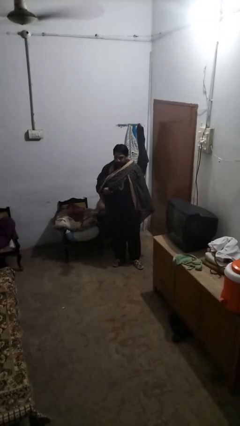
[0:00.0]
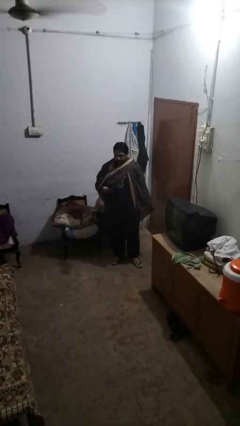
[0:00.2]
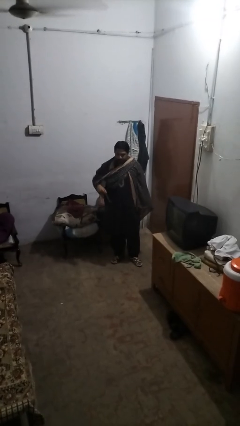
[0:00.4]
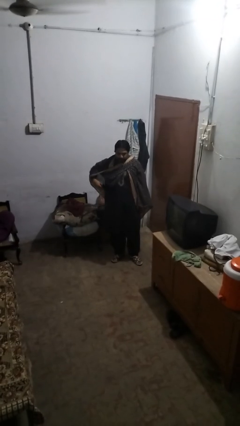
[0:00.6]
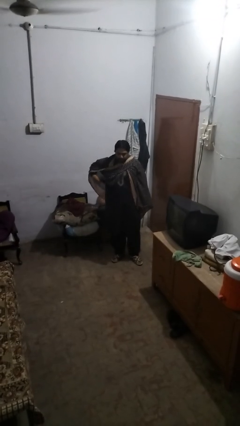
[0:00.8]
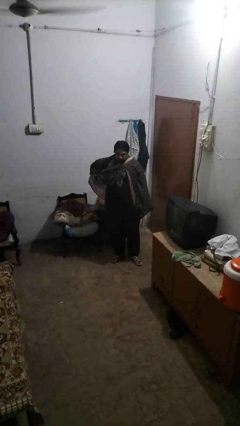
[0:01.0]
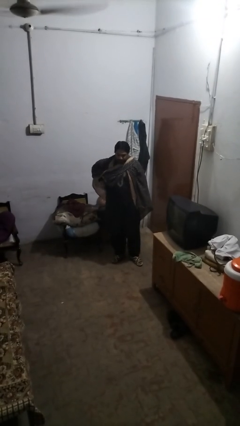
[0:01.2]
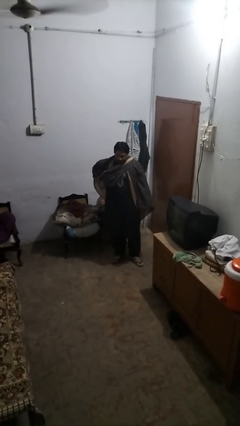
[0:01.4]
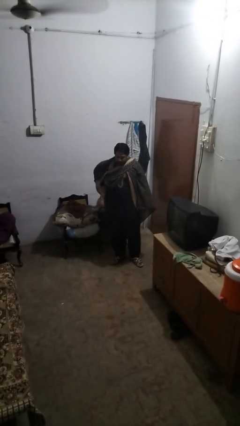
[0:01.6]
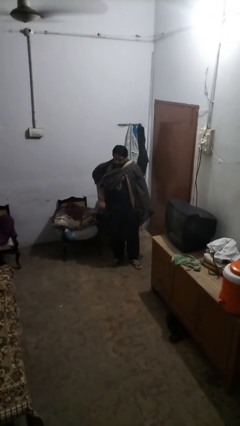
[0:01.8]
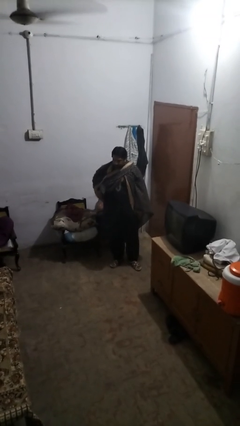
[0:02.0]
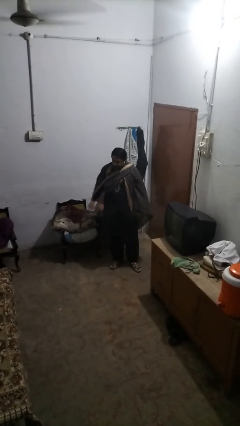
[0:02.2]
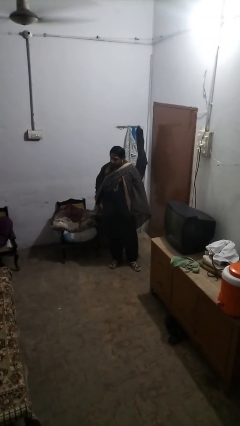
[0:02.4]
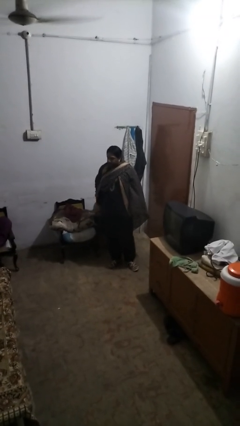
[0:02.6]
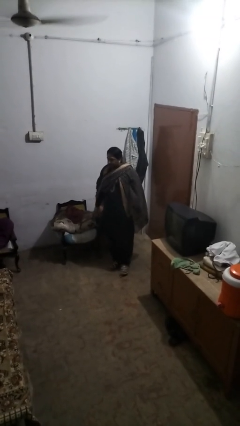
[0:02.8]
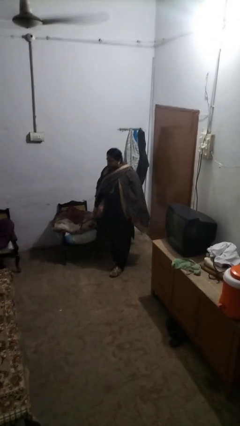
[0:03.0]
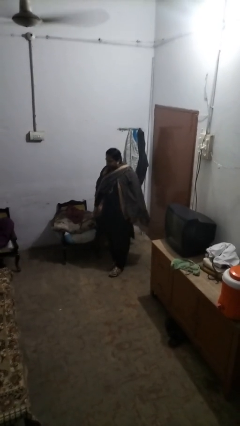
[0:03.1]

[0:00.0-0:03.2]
person puts phone into pocket

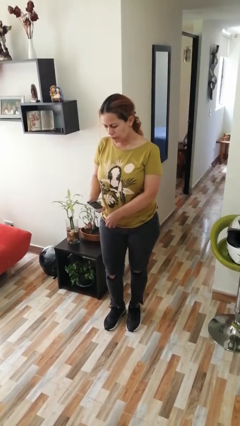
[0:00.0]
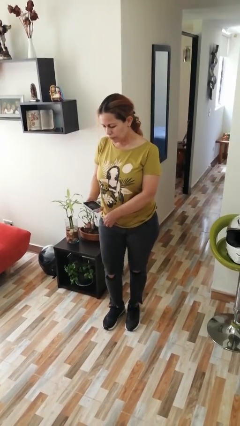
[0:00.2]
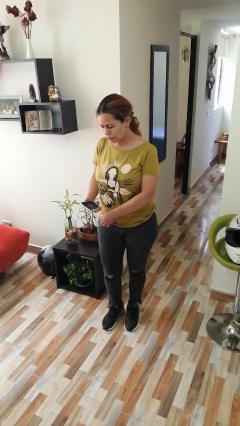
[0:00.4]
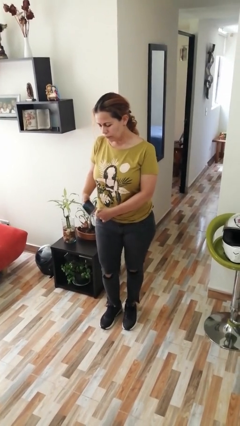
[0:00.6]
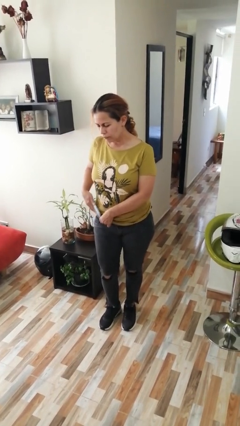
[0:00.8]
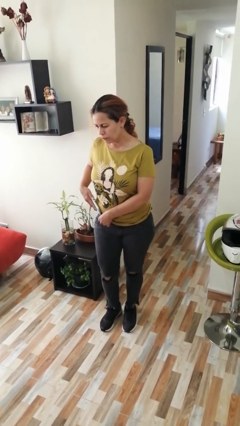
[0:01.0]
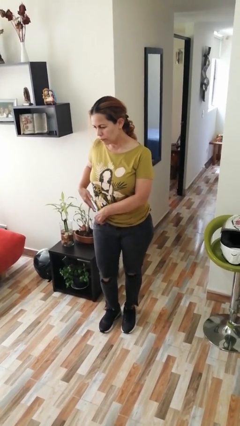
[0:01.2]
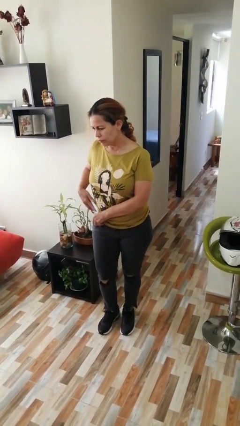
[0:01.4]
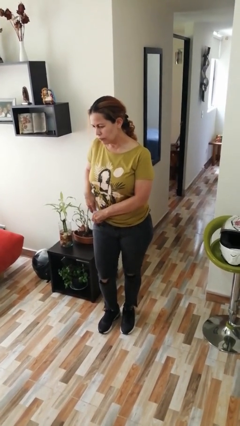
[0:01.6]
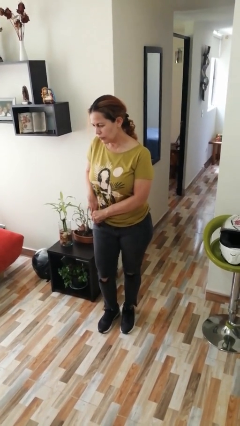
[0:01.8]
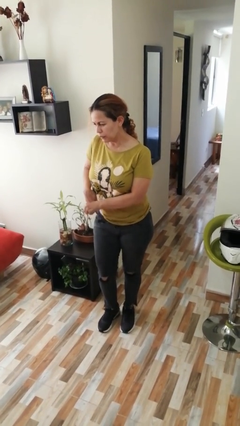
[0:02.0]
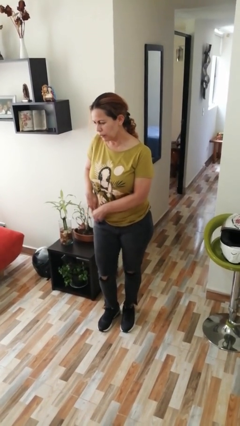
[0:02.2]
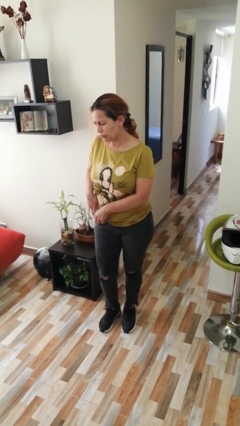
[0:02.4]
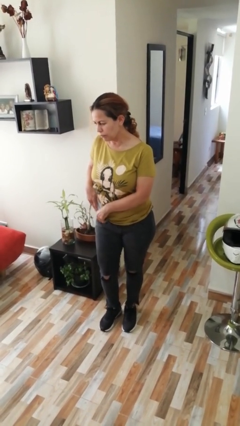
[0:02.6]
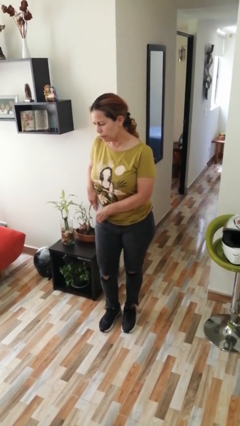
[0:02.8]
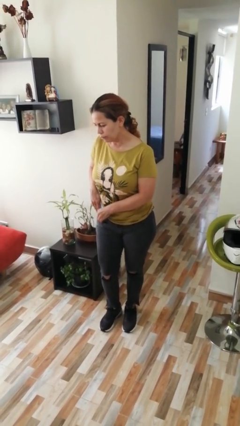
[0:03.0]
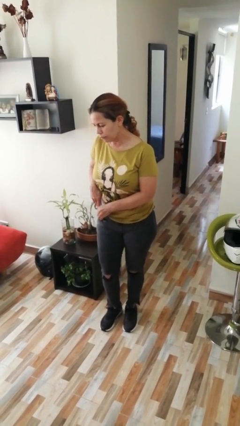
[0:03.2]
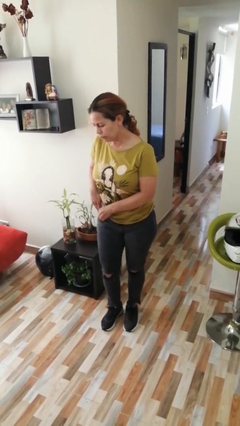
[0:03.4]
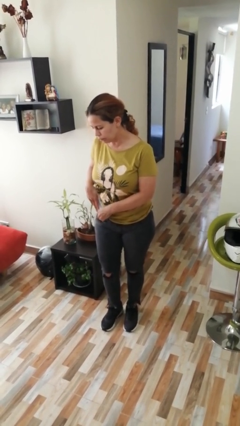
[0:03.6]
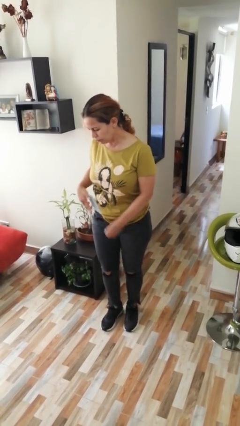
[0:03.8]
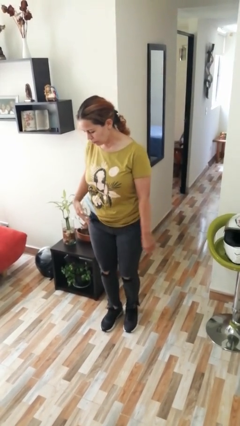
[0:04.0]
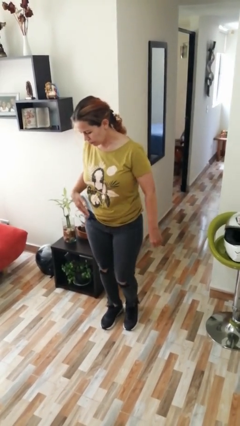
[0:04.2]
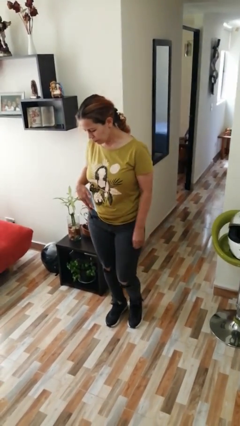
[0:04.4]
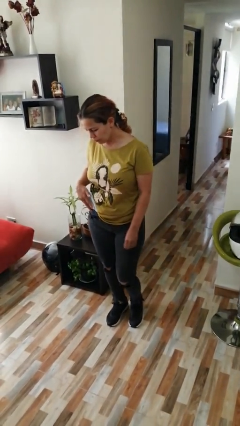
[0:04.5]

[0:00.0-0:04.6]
person takes phone from pocket

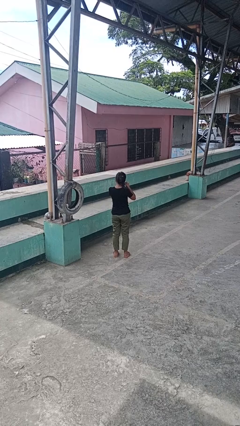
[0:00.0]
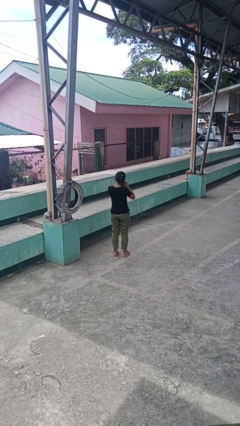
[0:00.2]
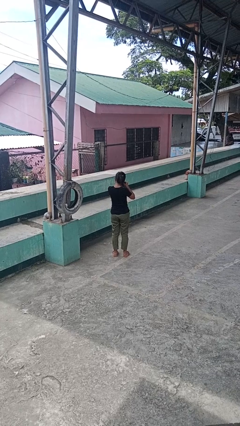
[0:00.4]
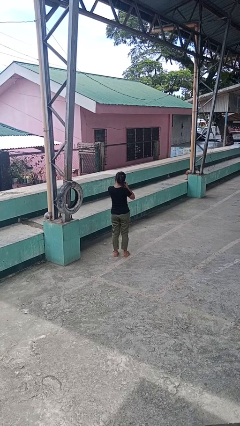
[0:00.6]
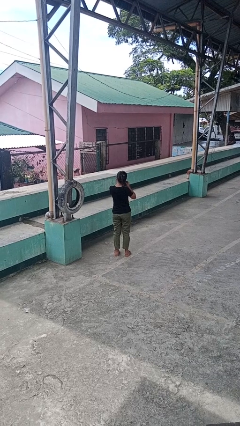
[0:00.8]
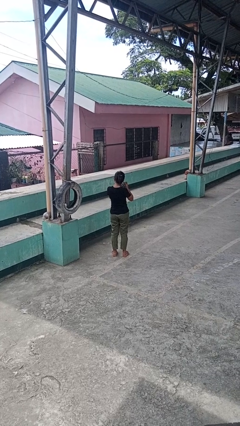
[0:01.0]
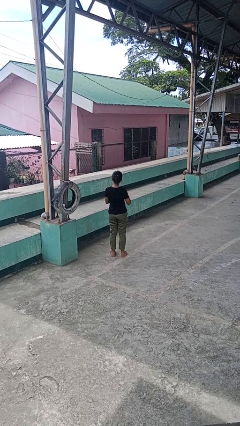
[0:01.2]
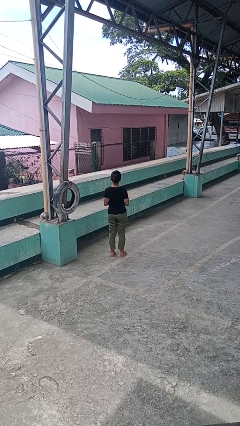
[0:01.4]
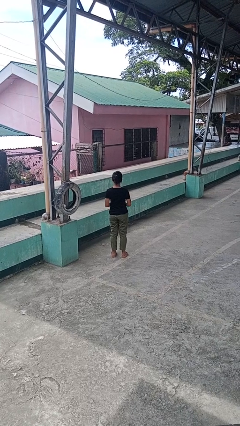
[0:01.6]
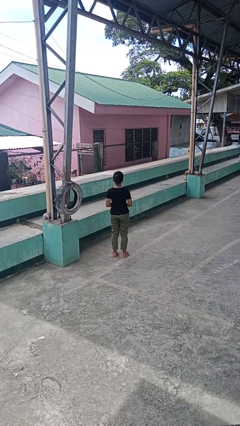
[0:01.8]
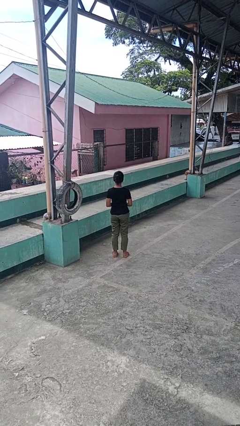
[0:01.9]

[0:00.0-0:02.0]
person takes off earrings

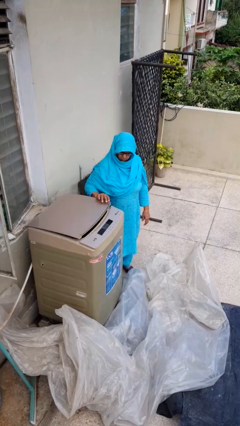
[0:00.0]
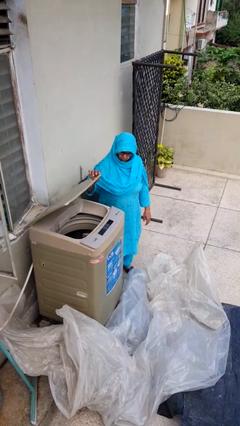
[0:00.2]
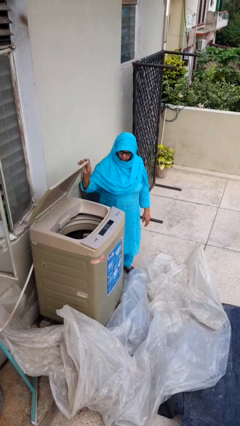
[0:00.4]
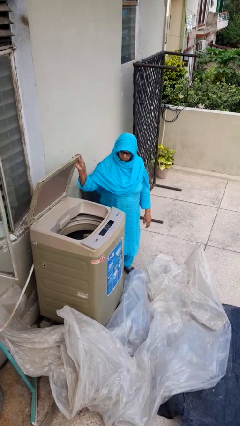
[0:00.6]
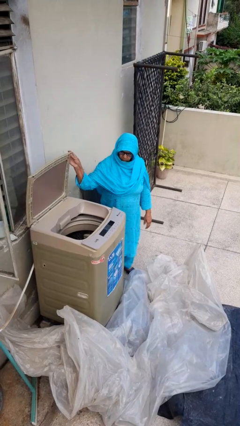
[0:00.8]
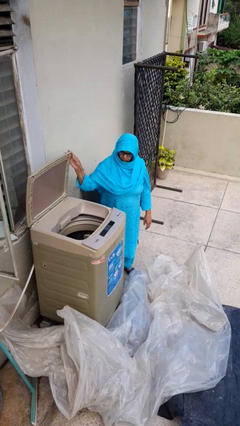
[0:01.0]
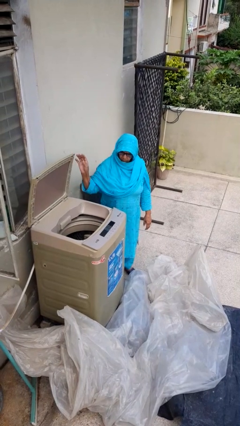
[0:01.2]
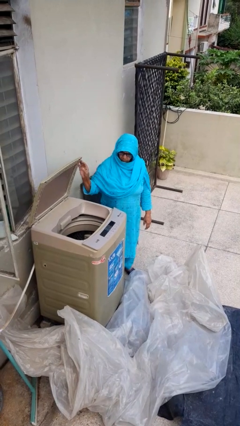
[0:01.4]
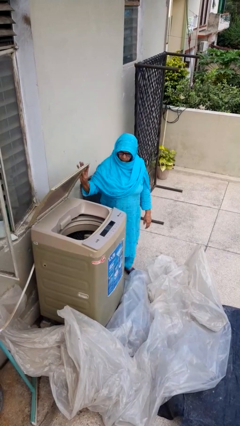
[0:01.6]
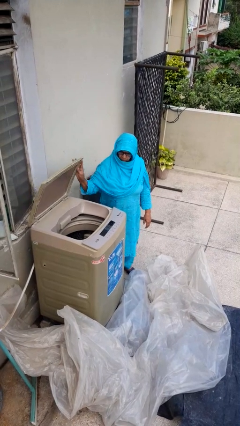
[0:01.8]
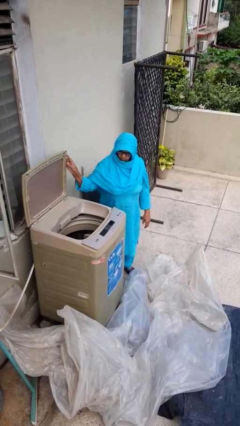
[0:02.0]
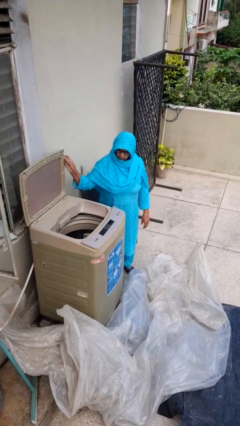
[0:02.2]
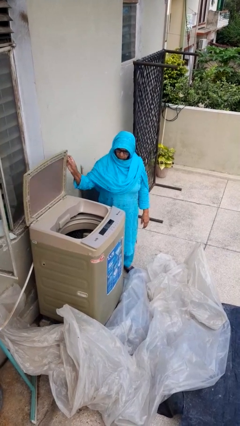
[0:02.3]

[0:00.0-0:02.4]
person opens clothes washer

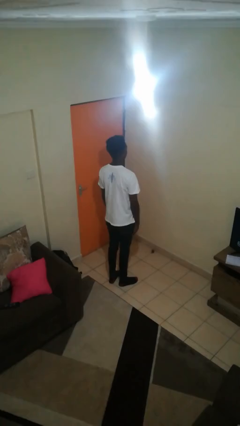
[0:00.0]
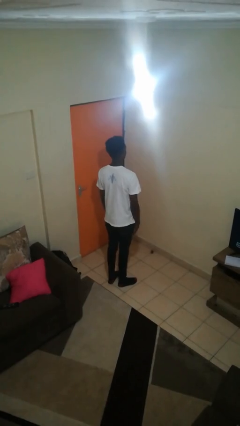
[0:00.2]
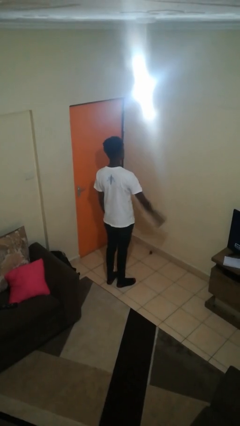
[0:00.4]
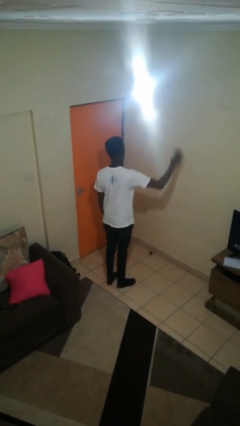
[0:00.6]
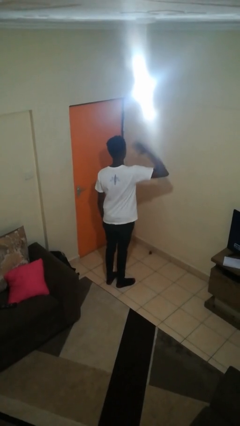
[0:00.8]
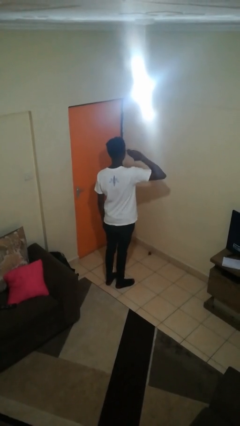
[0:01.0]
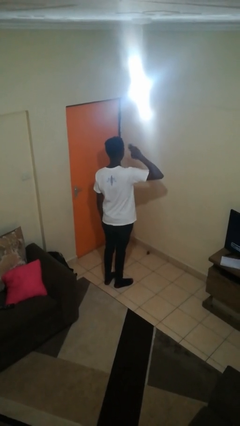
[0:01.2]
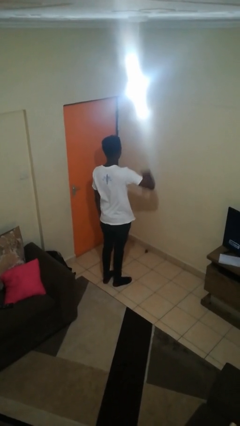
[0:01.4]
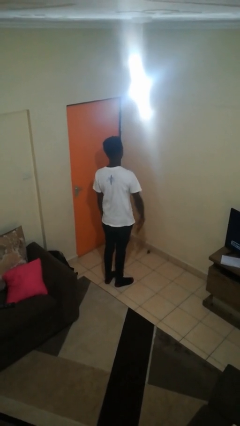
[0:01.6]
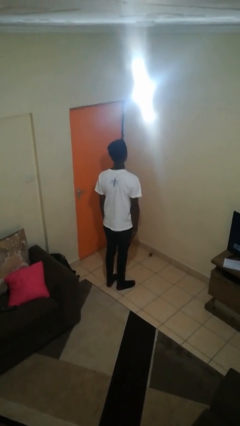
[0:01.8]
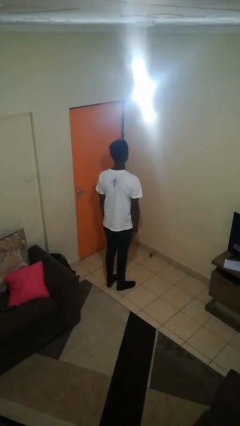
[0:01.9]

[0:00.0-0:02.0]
person salutes

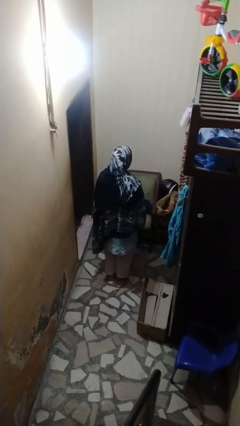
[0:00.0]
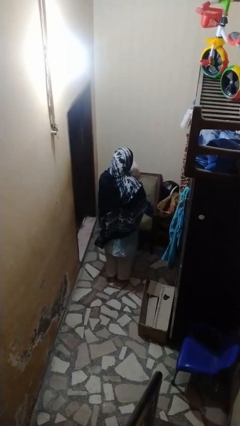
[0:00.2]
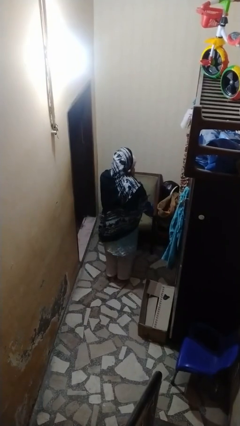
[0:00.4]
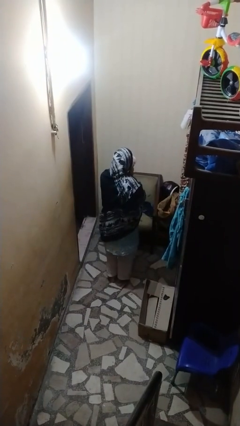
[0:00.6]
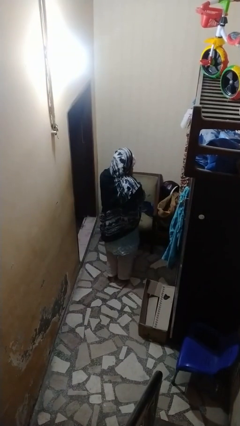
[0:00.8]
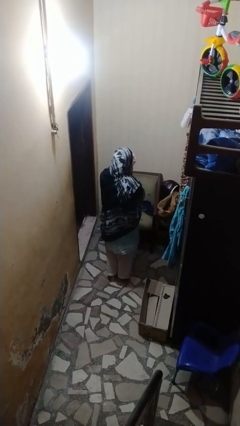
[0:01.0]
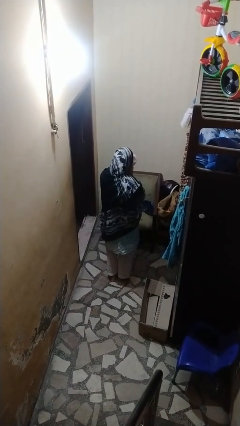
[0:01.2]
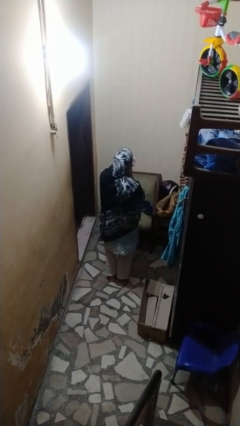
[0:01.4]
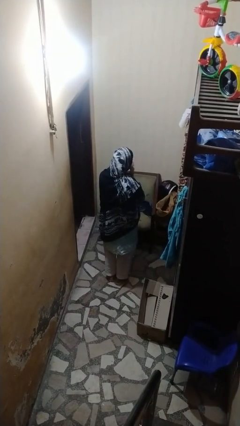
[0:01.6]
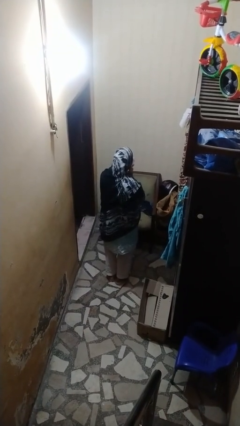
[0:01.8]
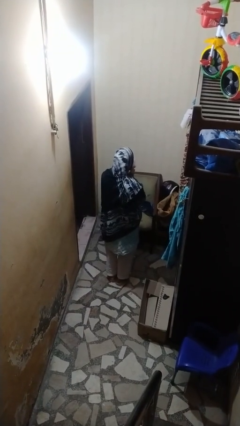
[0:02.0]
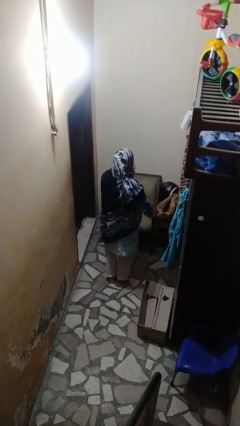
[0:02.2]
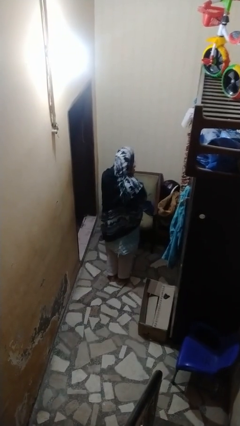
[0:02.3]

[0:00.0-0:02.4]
person blows nose

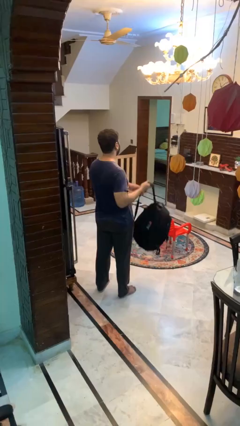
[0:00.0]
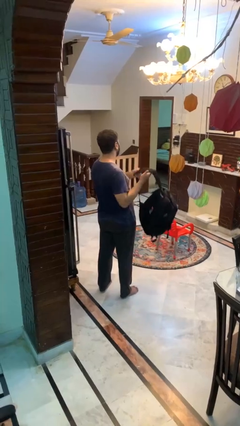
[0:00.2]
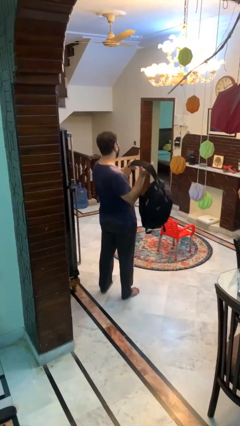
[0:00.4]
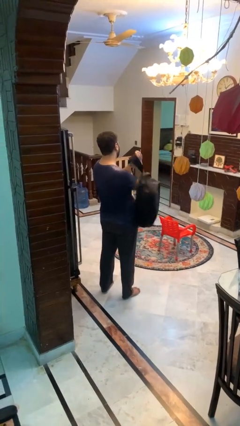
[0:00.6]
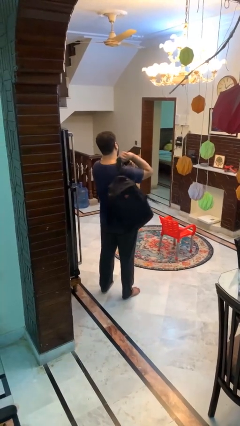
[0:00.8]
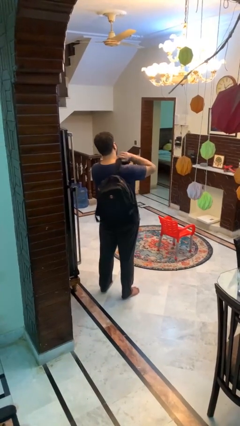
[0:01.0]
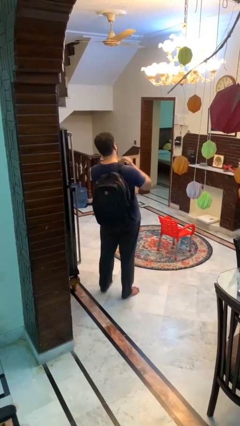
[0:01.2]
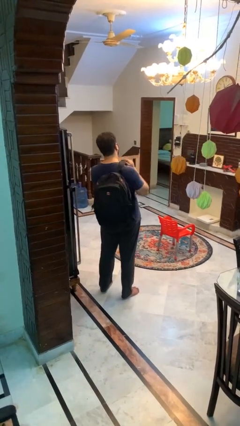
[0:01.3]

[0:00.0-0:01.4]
person puts on backpack
